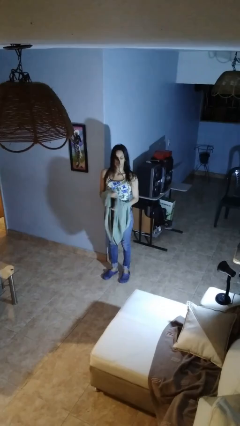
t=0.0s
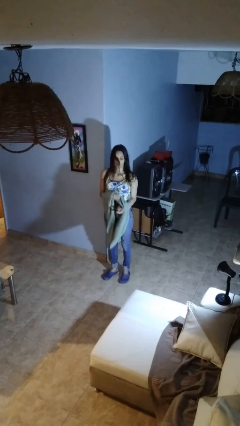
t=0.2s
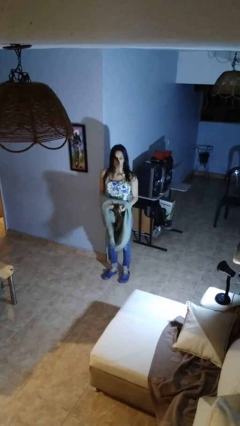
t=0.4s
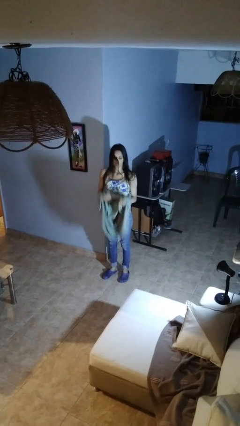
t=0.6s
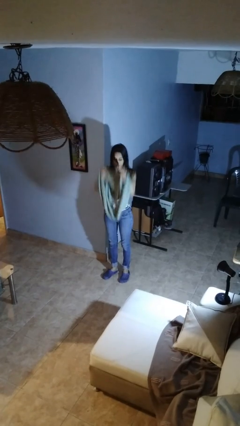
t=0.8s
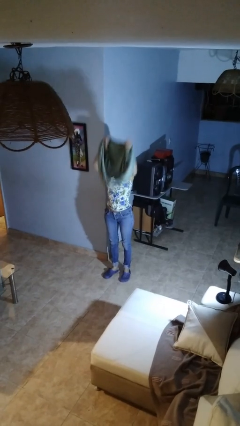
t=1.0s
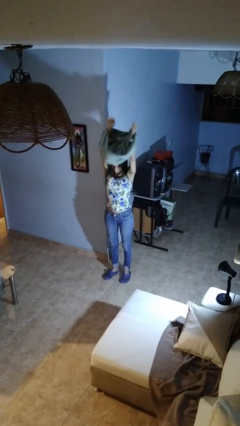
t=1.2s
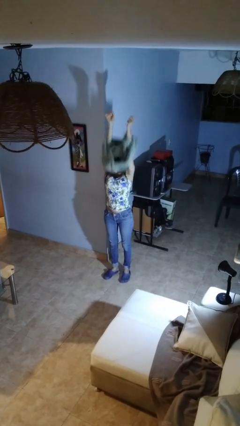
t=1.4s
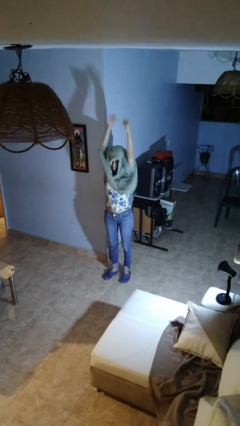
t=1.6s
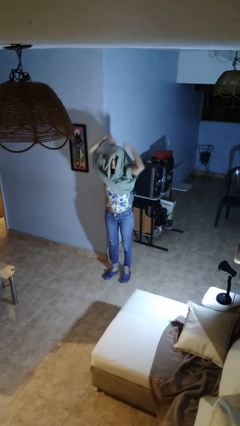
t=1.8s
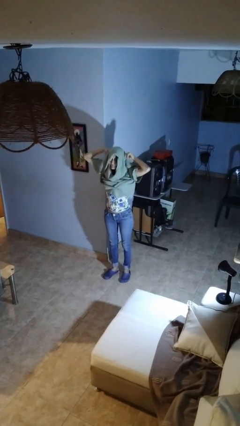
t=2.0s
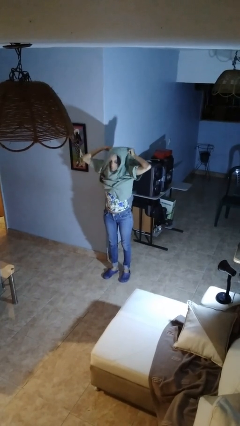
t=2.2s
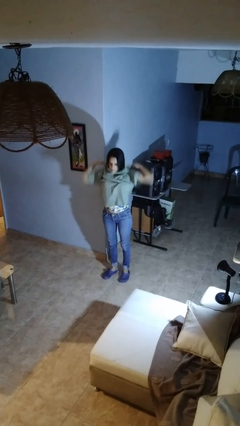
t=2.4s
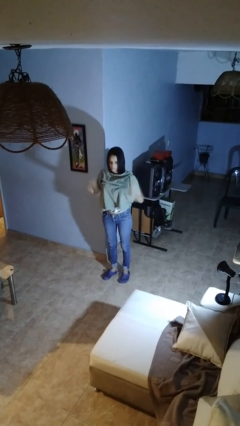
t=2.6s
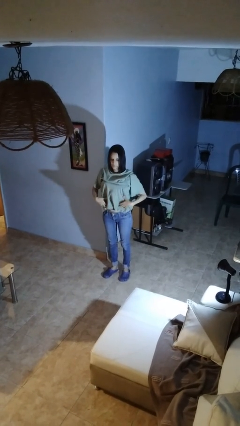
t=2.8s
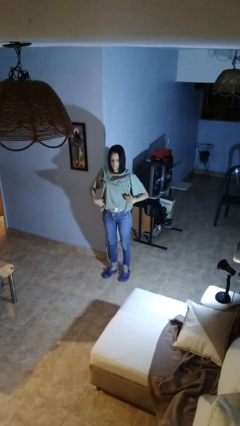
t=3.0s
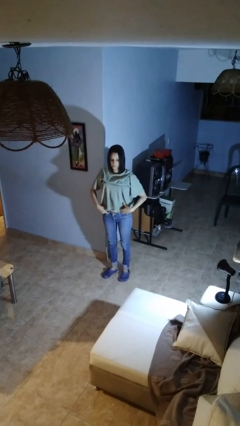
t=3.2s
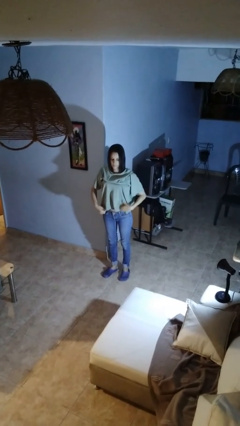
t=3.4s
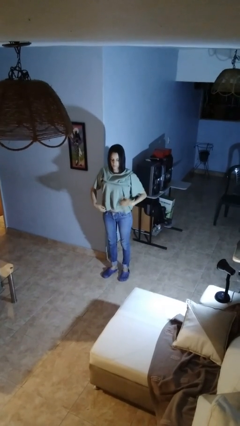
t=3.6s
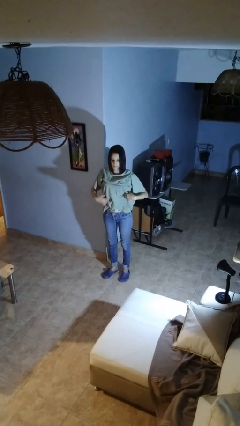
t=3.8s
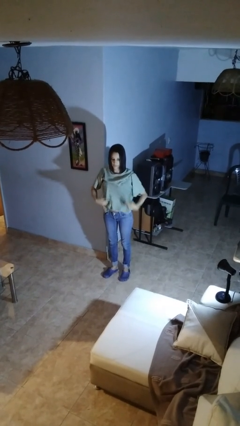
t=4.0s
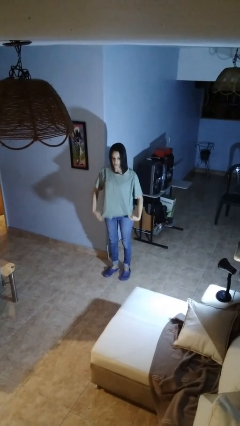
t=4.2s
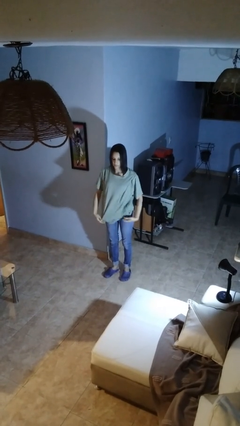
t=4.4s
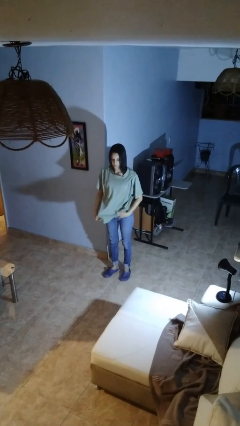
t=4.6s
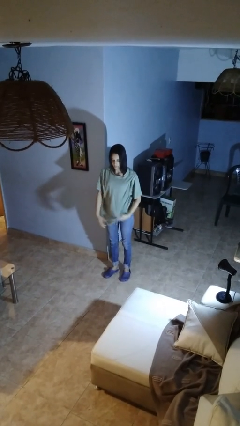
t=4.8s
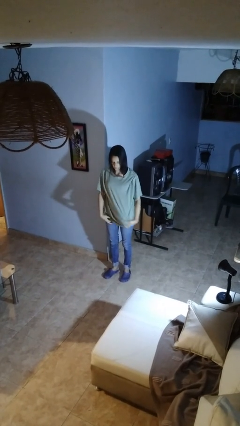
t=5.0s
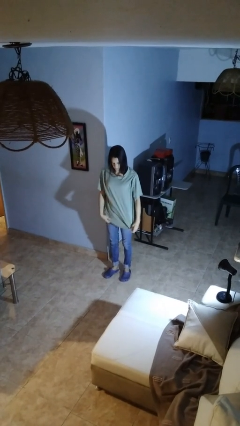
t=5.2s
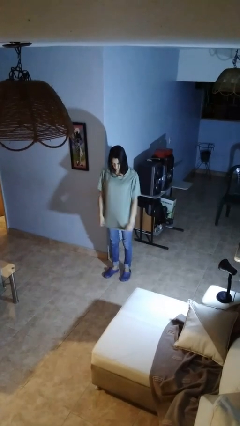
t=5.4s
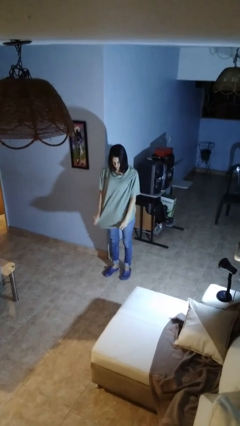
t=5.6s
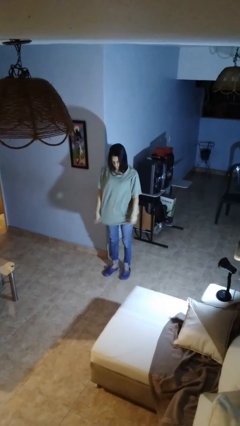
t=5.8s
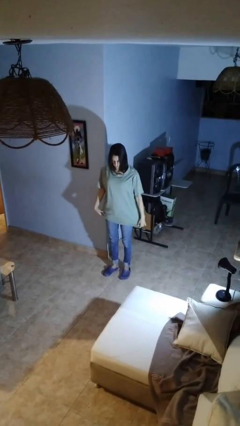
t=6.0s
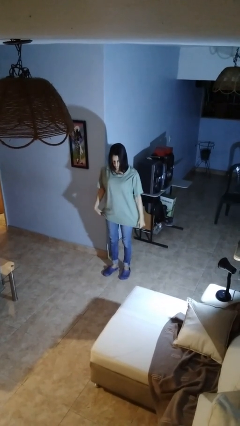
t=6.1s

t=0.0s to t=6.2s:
person puts on shirt

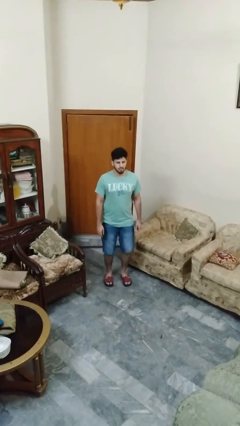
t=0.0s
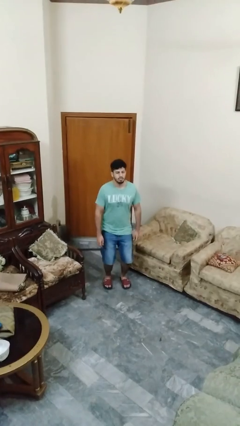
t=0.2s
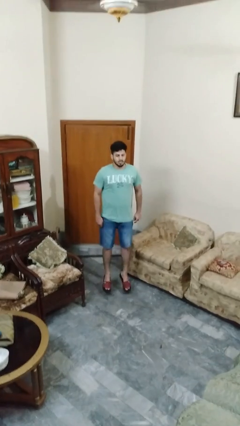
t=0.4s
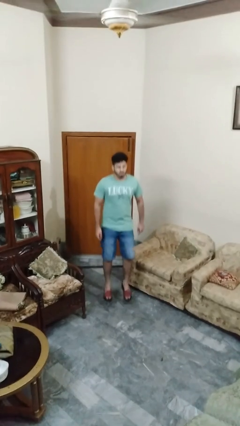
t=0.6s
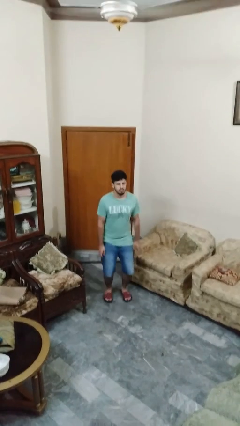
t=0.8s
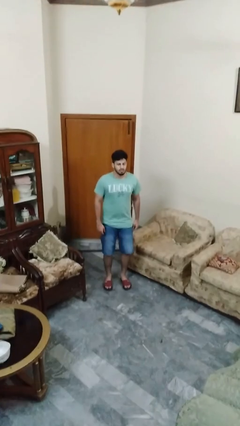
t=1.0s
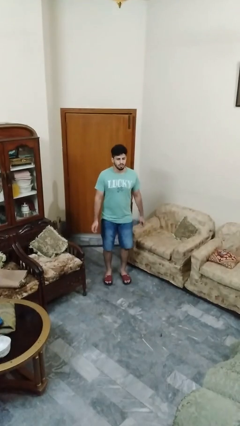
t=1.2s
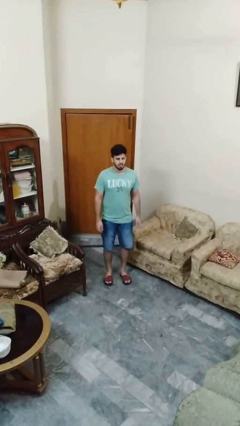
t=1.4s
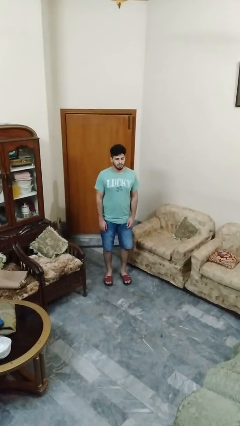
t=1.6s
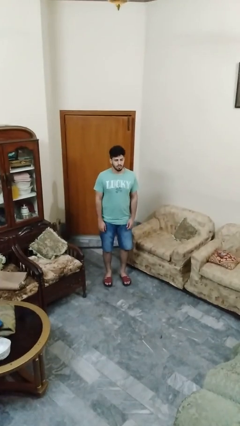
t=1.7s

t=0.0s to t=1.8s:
person jumps

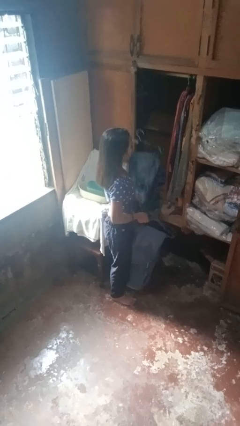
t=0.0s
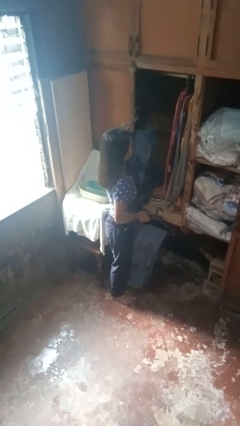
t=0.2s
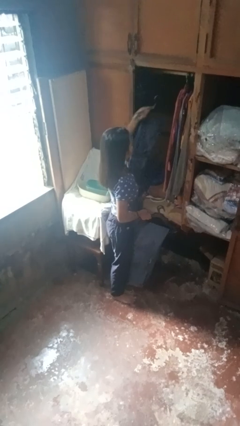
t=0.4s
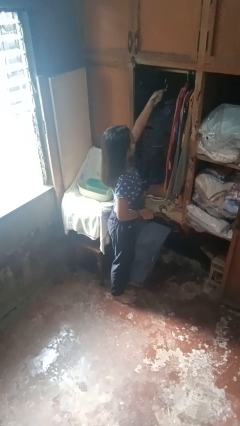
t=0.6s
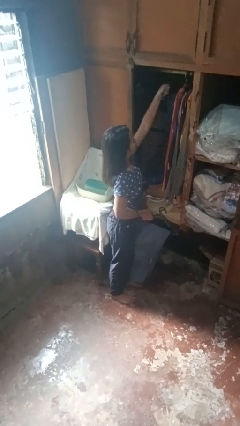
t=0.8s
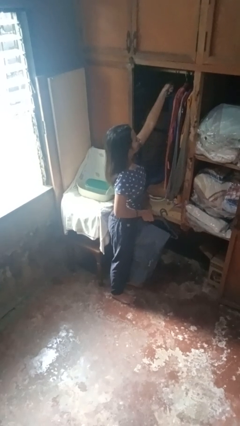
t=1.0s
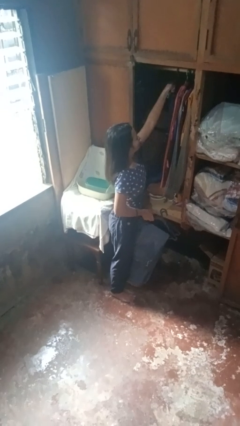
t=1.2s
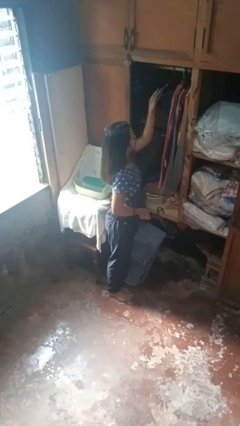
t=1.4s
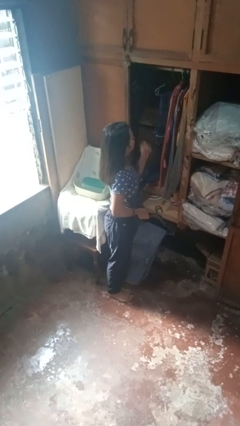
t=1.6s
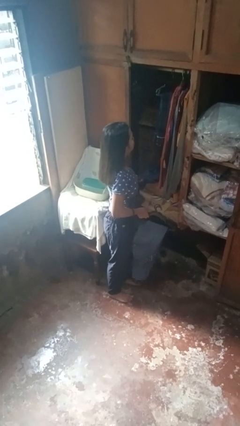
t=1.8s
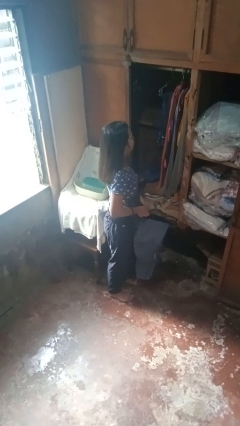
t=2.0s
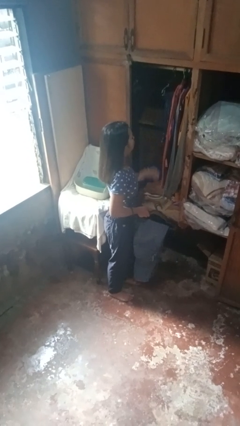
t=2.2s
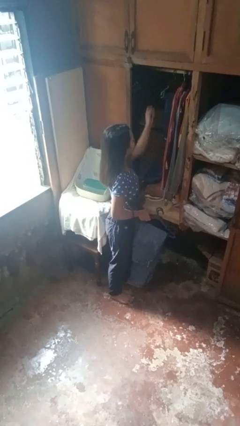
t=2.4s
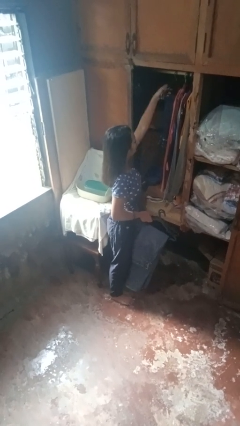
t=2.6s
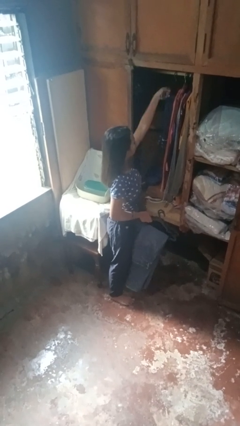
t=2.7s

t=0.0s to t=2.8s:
person puts clothes into closet

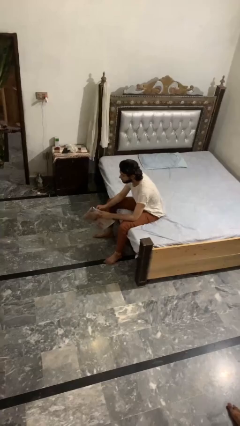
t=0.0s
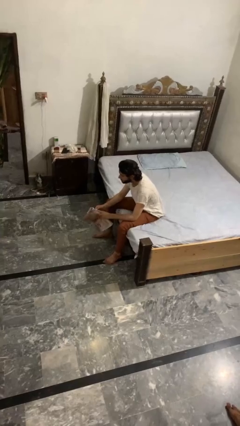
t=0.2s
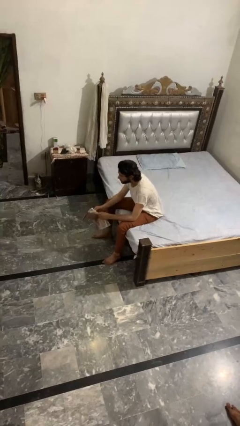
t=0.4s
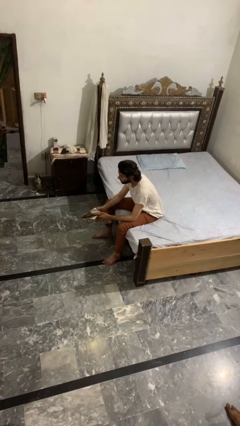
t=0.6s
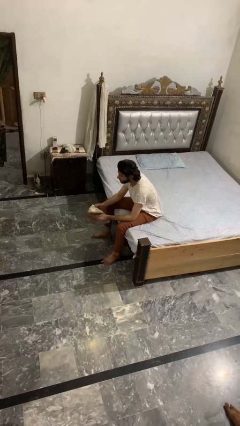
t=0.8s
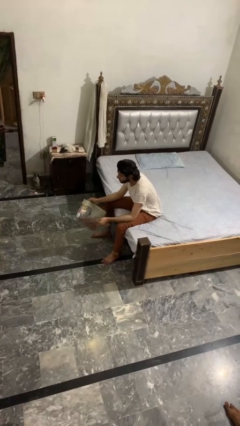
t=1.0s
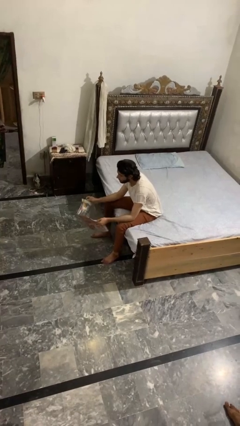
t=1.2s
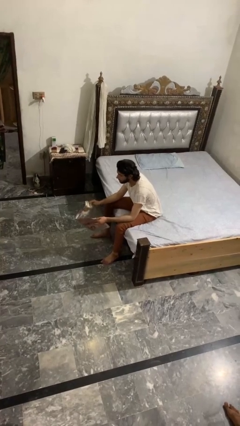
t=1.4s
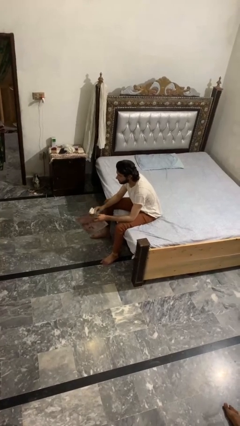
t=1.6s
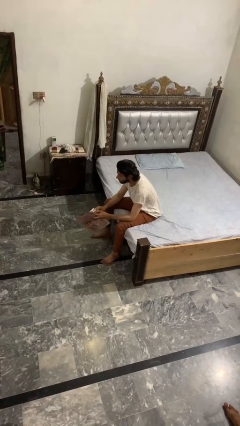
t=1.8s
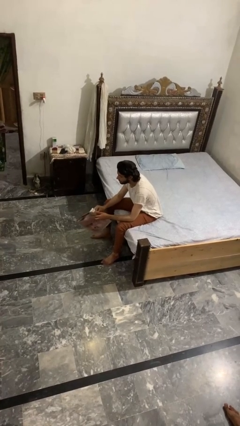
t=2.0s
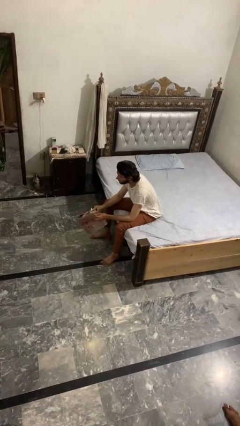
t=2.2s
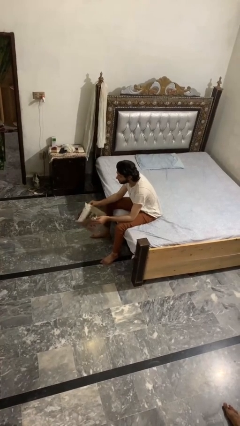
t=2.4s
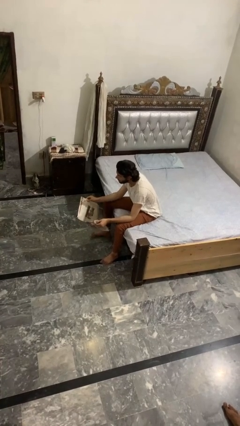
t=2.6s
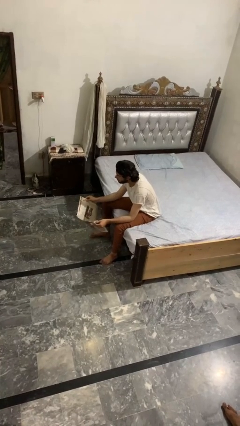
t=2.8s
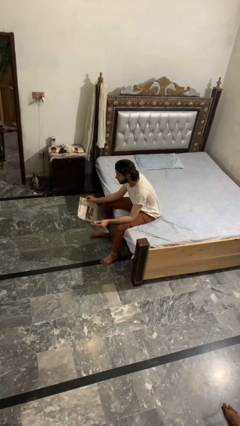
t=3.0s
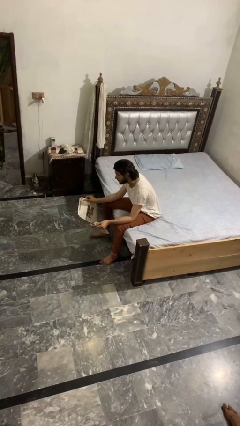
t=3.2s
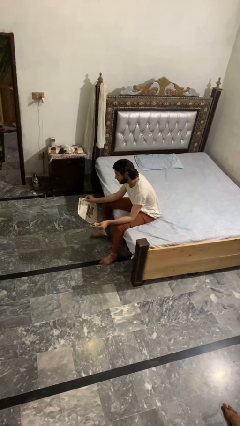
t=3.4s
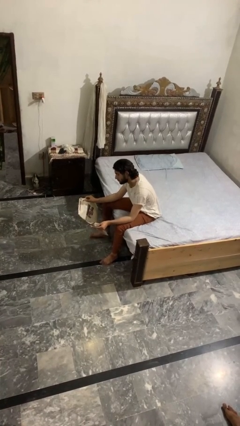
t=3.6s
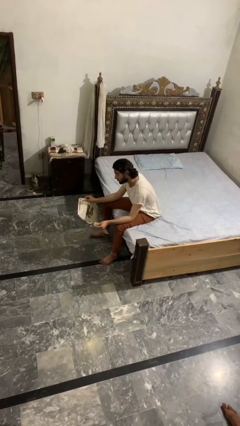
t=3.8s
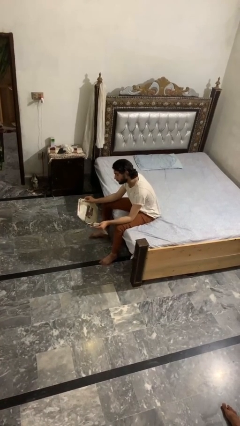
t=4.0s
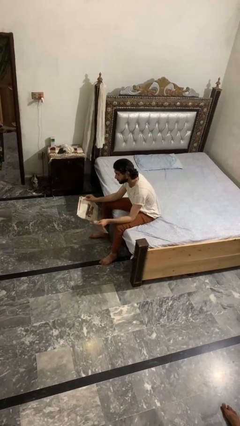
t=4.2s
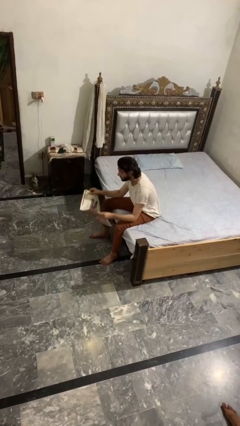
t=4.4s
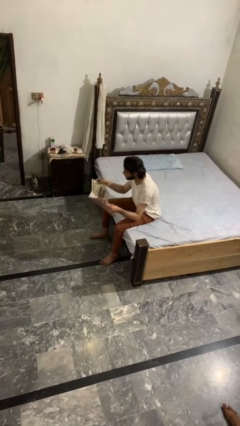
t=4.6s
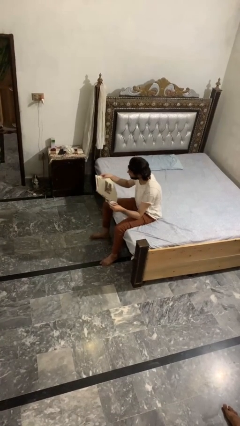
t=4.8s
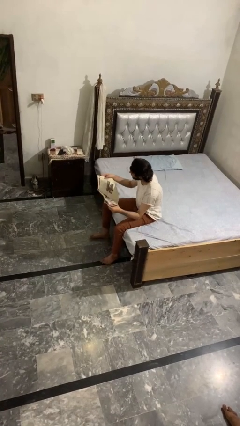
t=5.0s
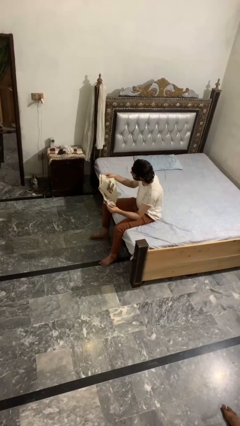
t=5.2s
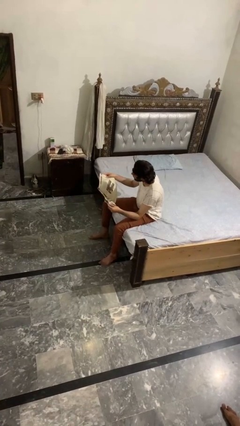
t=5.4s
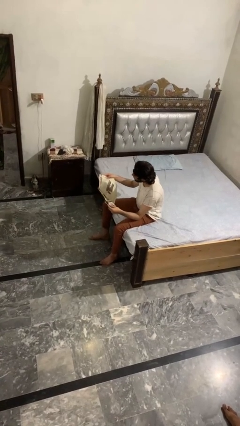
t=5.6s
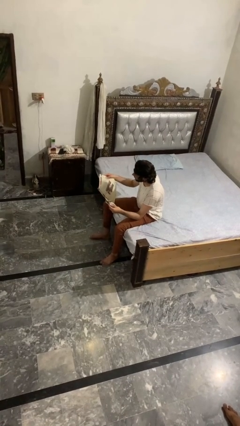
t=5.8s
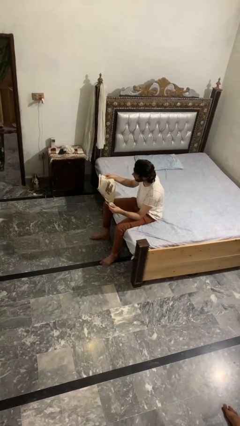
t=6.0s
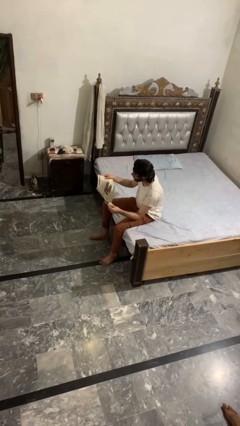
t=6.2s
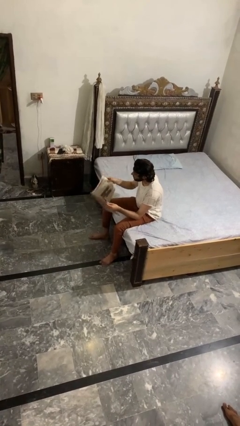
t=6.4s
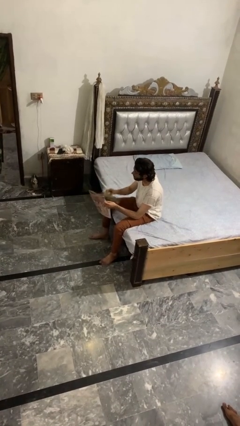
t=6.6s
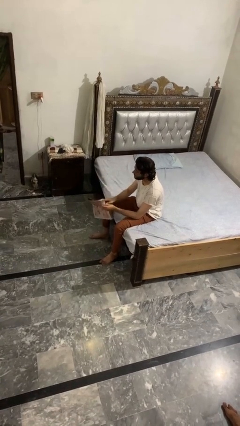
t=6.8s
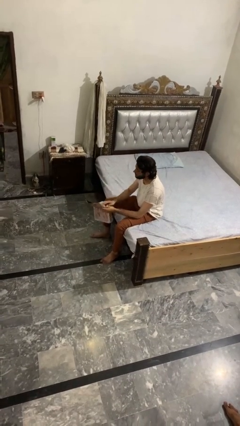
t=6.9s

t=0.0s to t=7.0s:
person reads magazine
